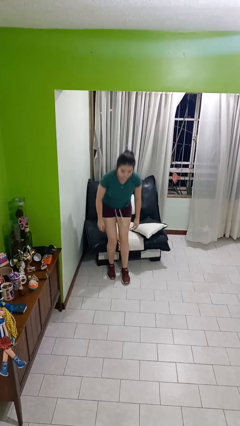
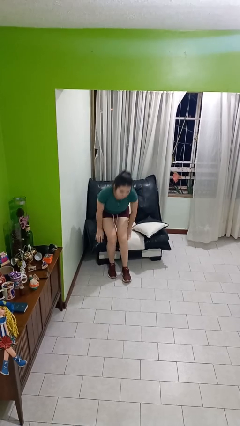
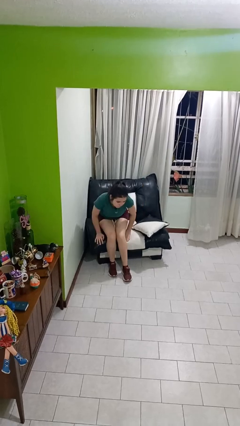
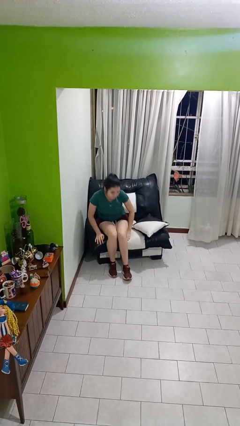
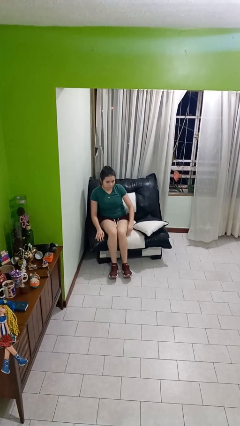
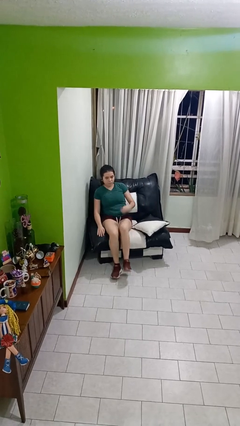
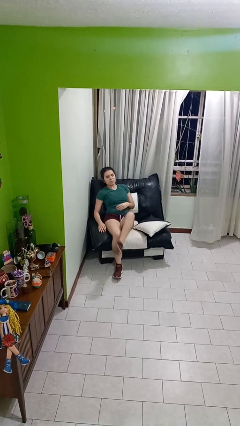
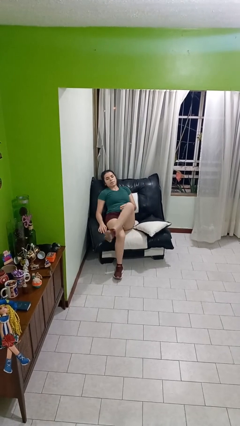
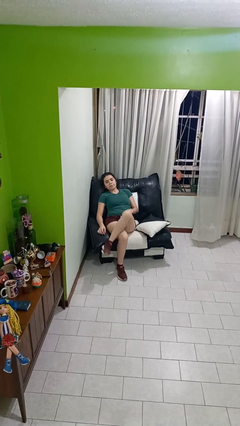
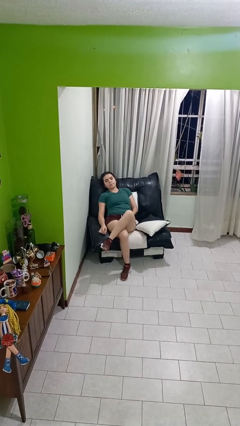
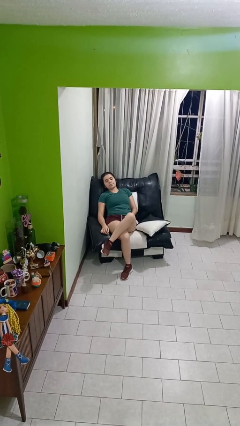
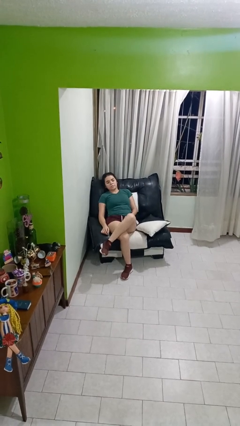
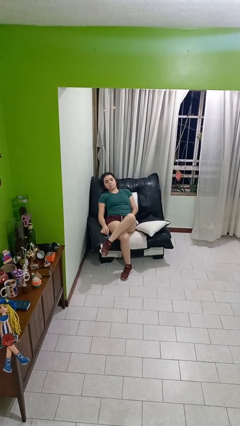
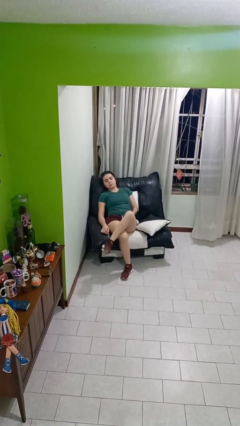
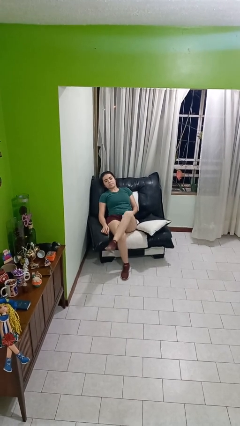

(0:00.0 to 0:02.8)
person lies down on couch

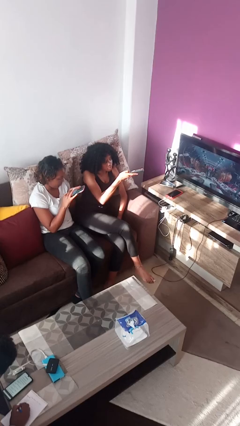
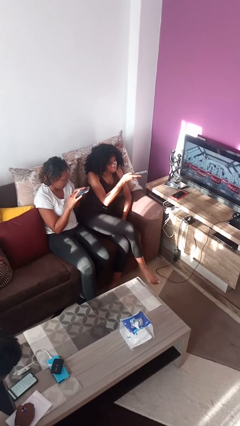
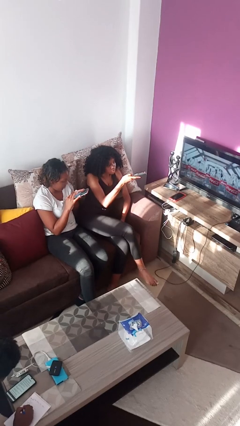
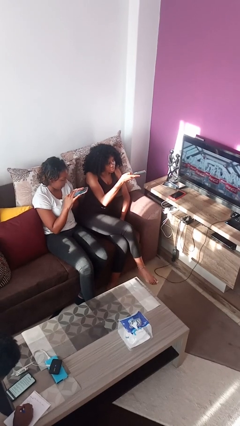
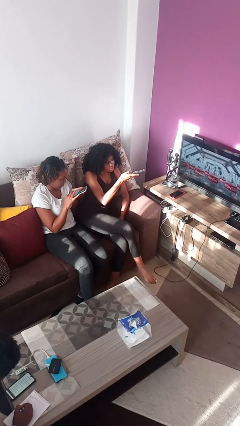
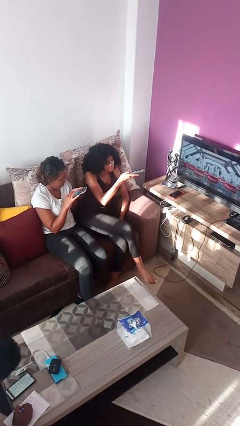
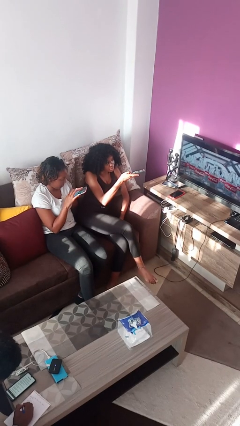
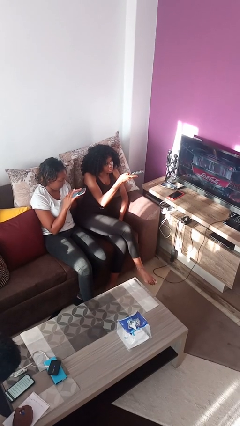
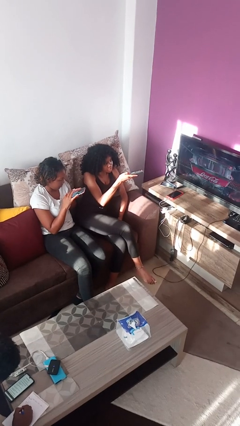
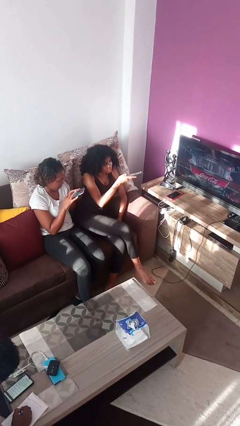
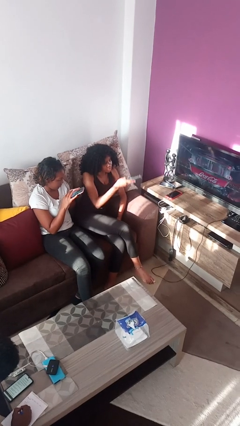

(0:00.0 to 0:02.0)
person uses television remote

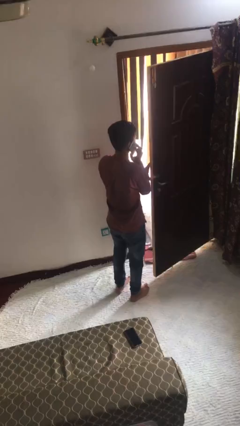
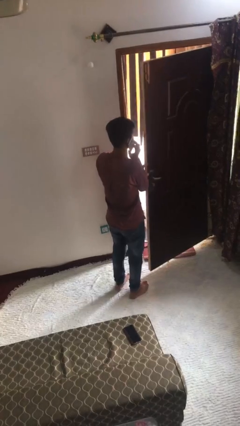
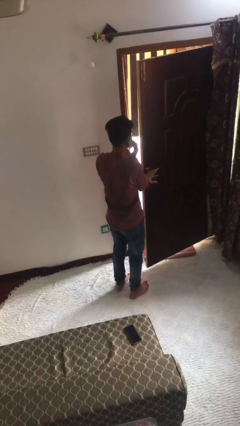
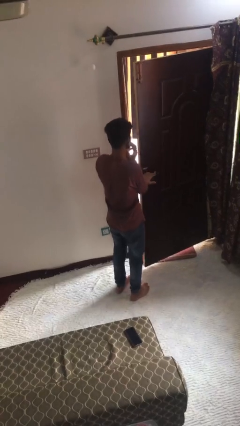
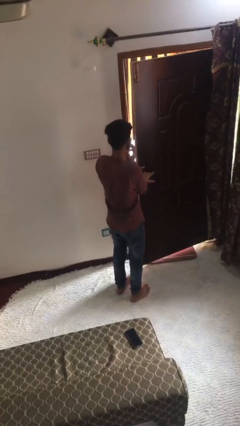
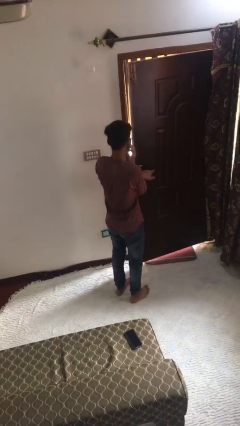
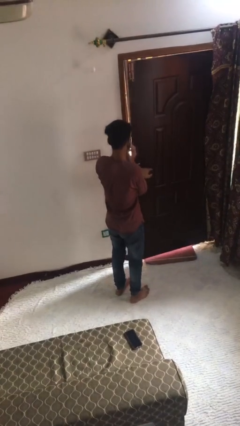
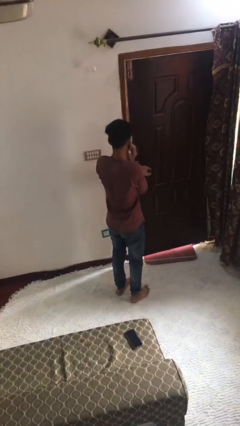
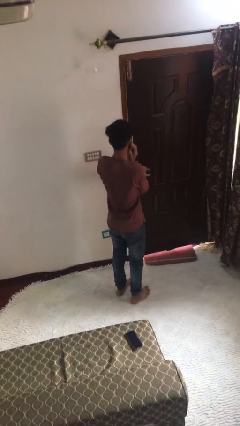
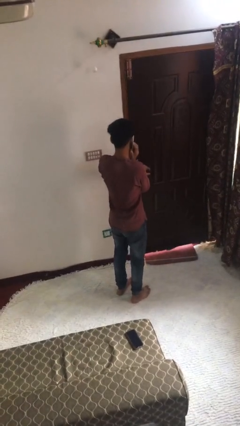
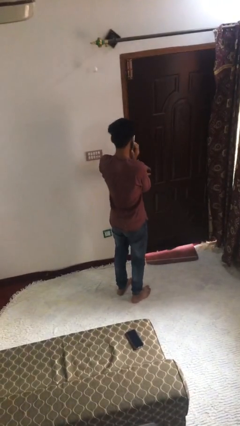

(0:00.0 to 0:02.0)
person closes facility door

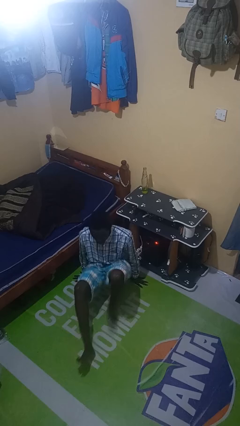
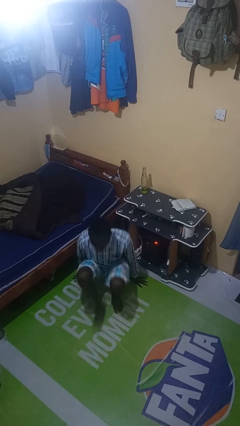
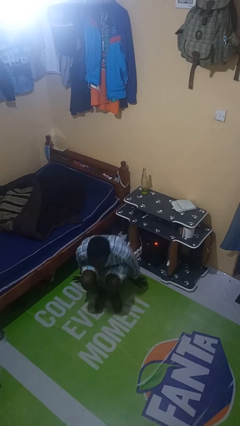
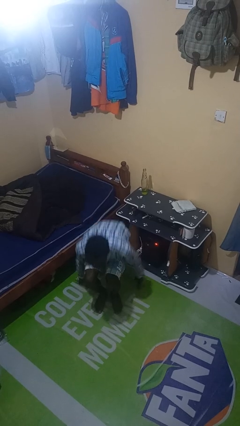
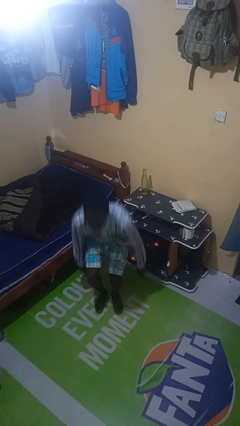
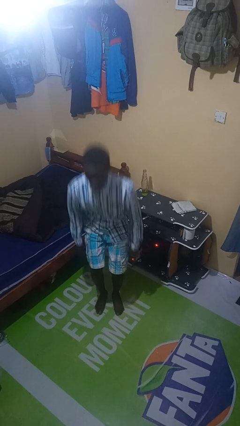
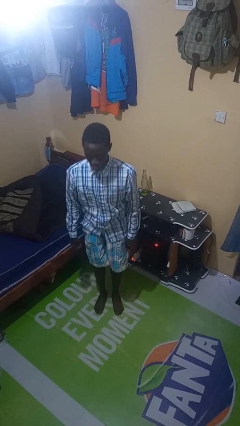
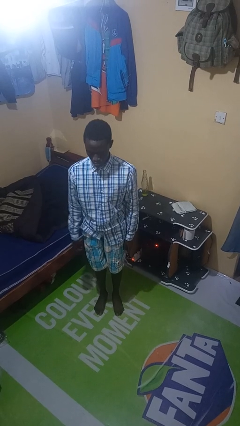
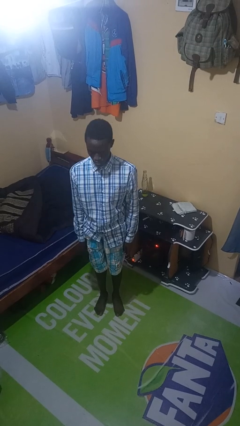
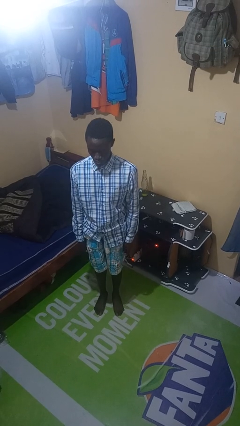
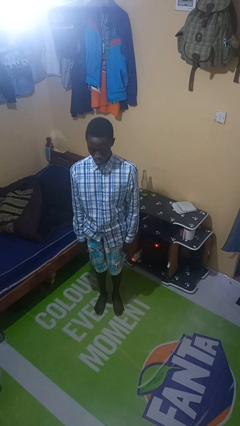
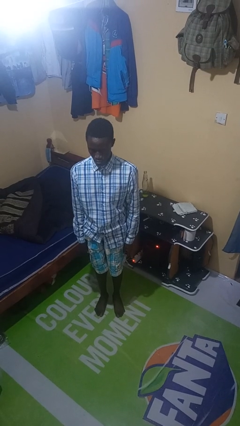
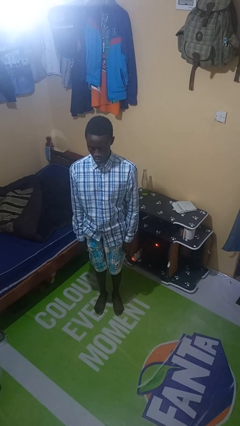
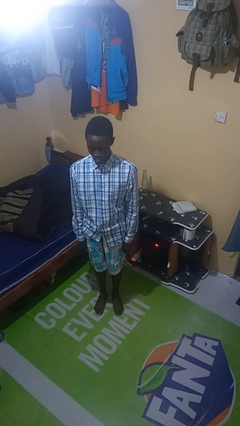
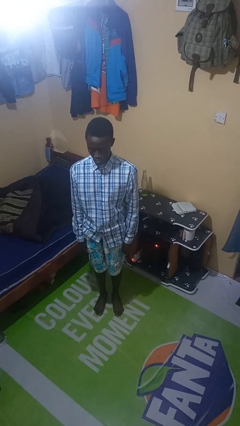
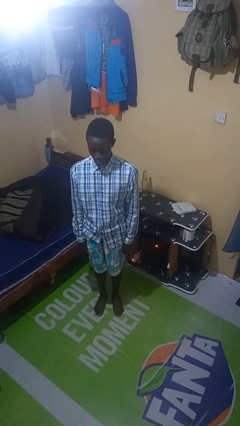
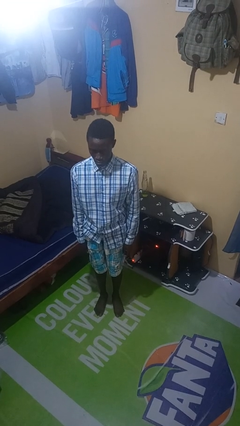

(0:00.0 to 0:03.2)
person stands up from floor

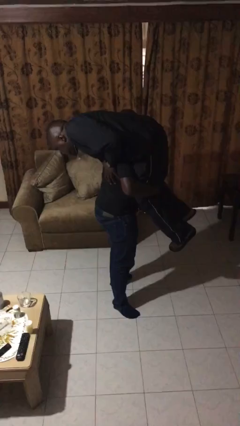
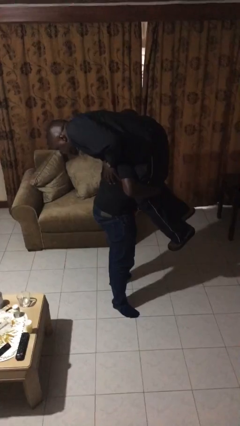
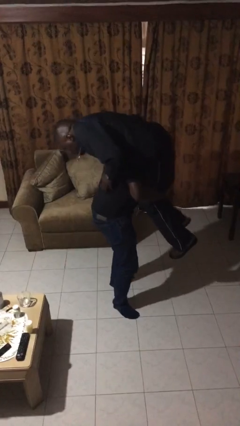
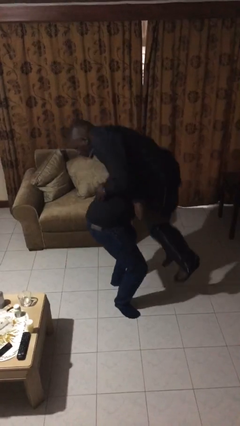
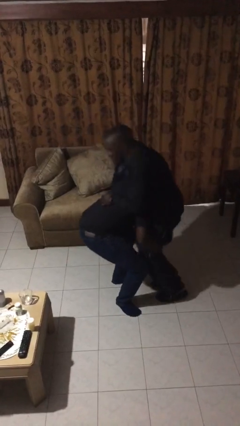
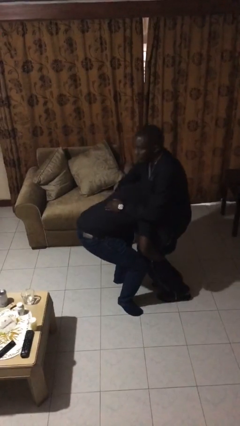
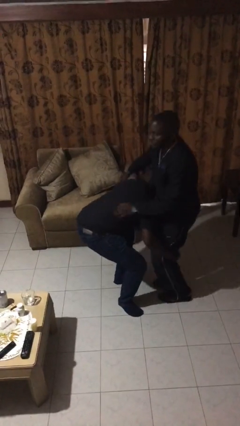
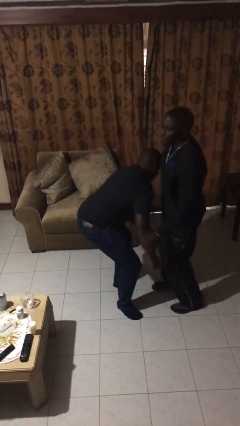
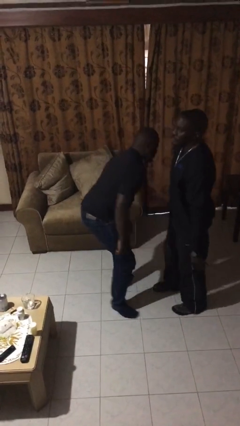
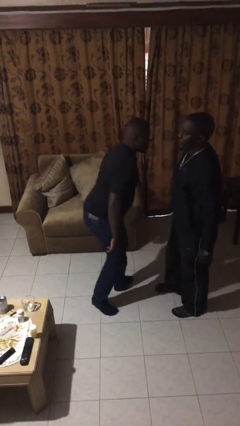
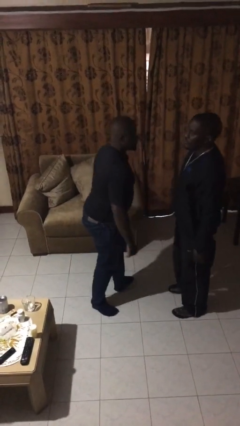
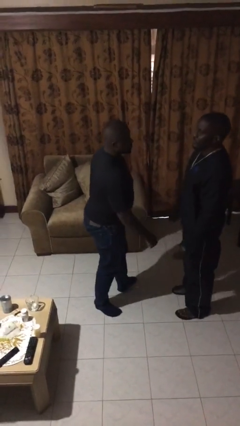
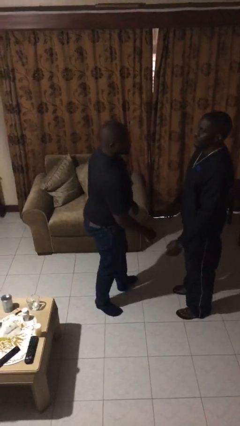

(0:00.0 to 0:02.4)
person puts down person

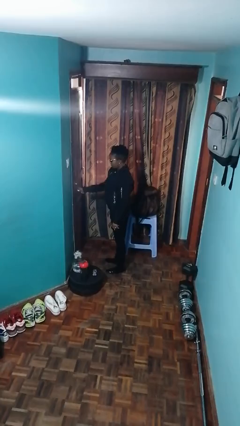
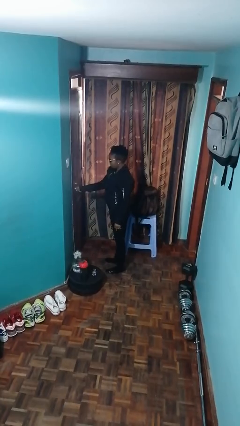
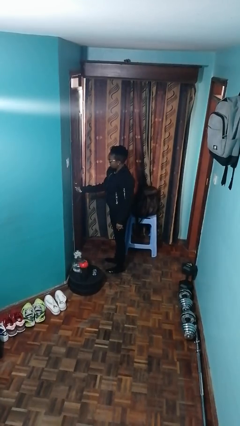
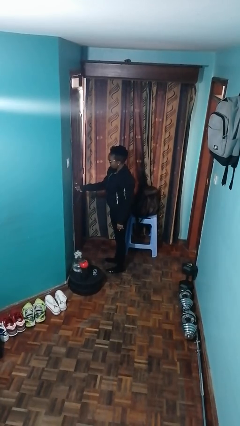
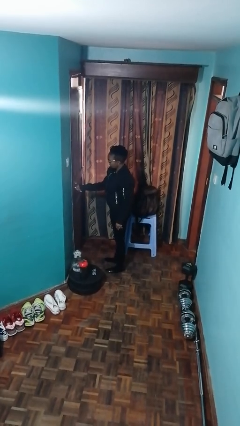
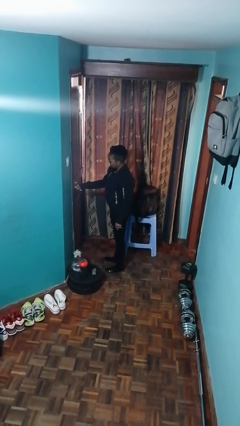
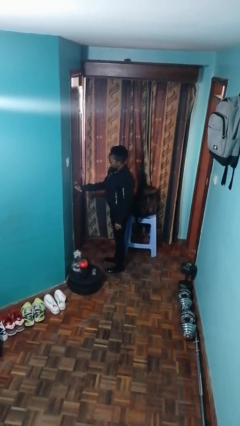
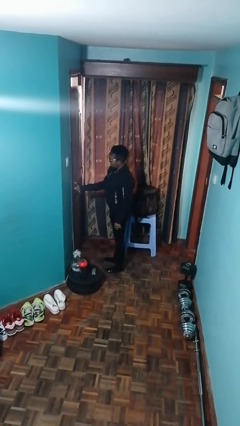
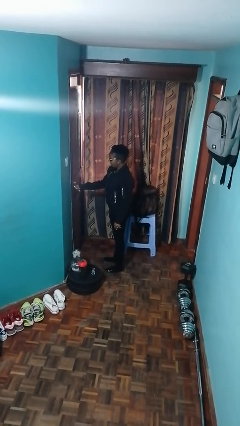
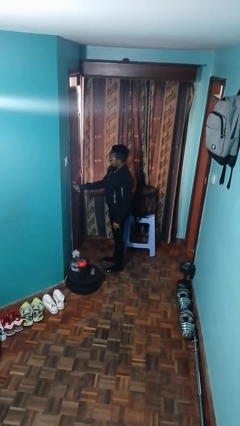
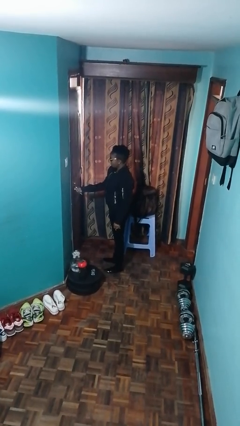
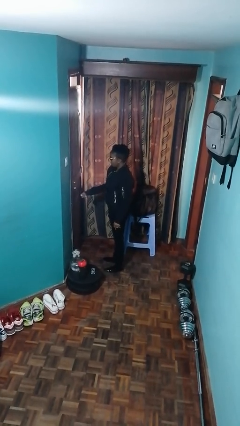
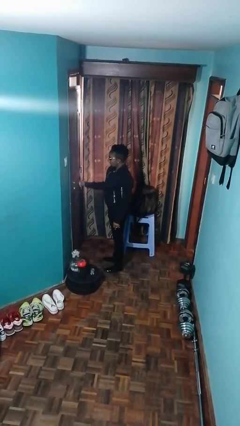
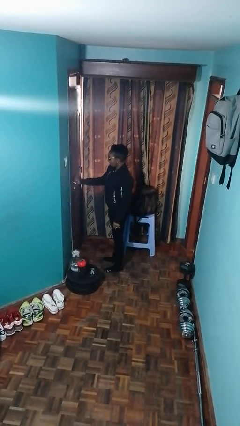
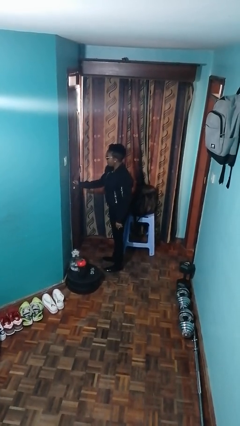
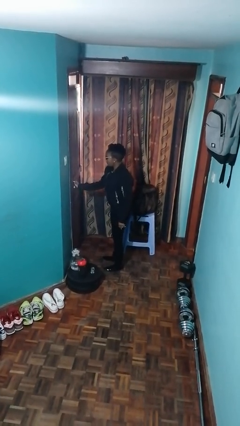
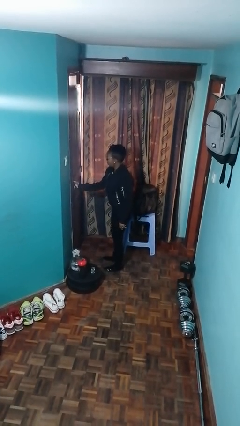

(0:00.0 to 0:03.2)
person unlocks door with keys

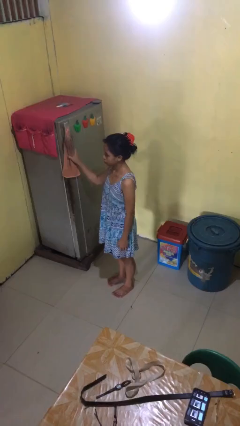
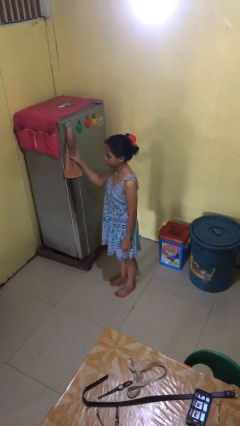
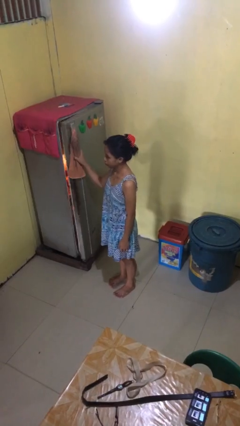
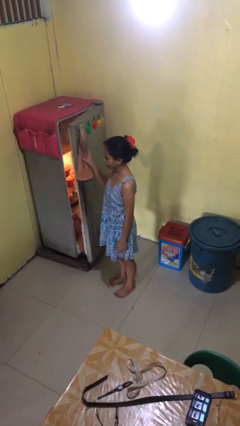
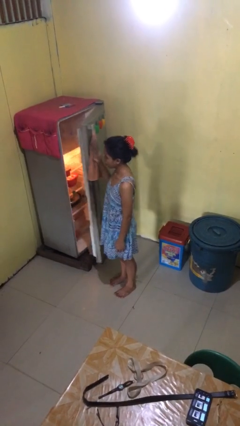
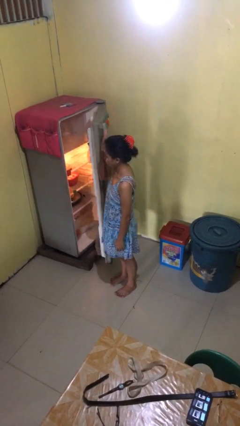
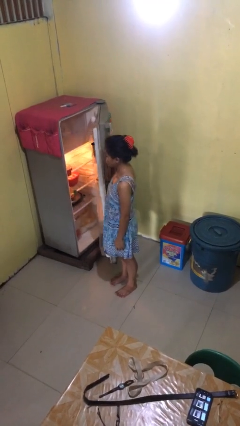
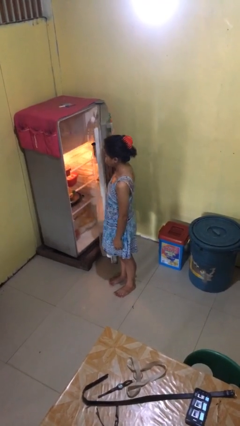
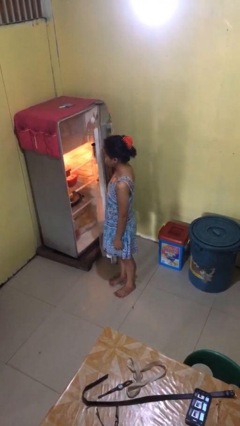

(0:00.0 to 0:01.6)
person opens refrigerator
